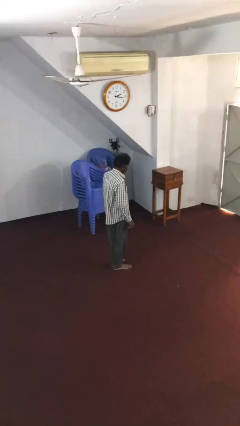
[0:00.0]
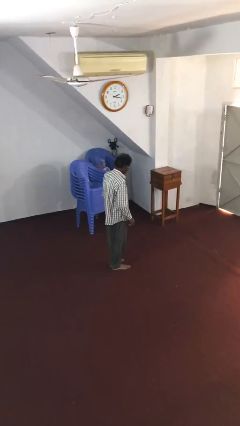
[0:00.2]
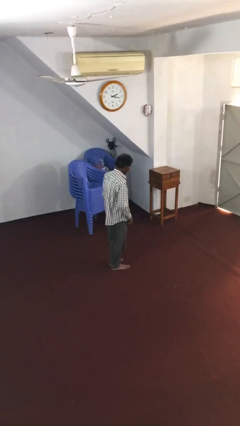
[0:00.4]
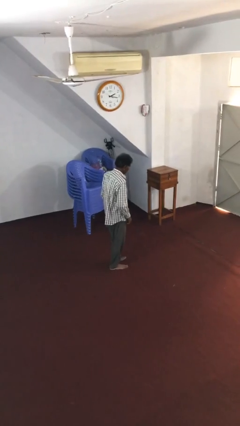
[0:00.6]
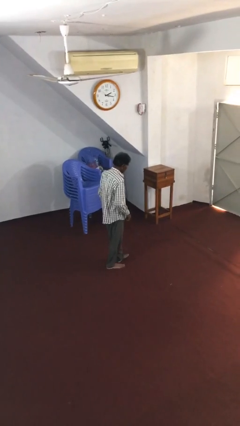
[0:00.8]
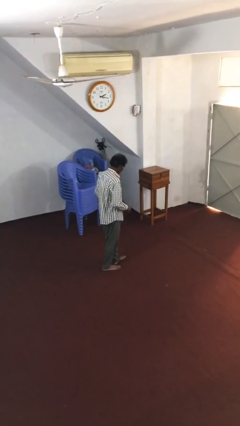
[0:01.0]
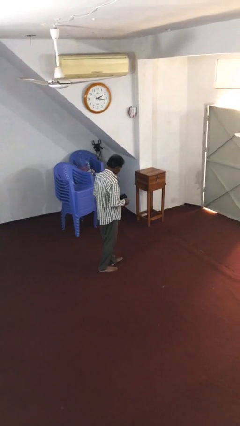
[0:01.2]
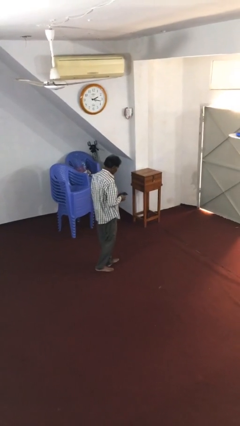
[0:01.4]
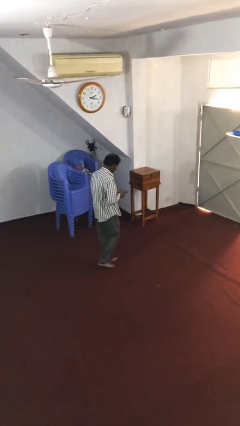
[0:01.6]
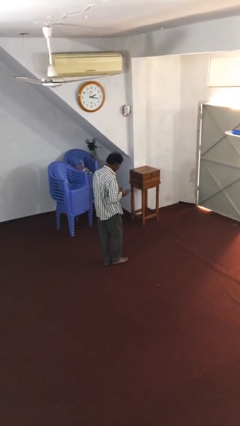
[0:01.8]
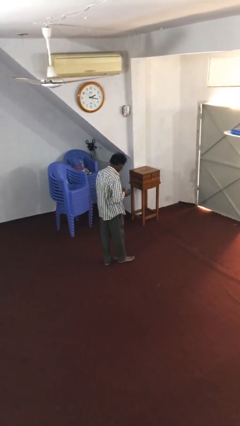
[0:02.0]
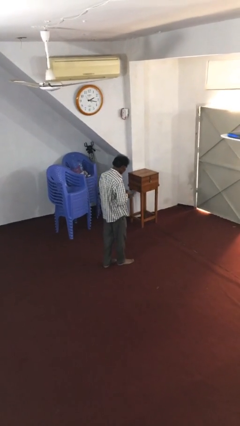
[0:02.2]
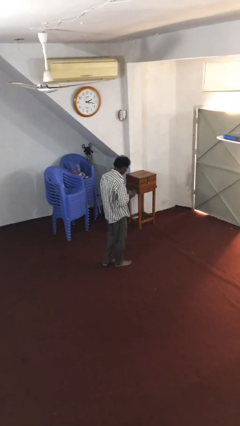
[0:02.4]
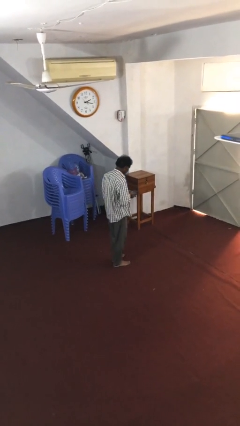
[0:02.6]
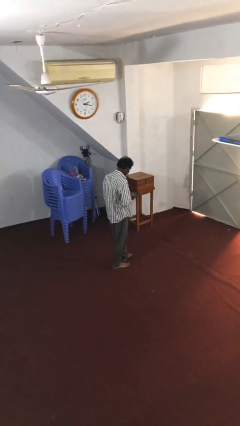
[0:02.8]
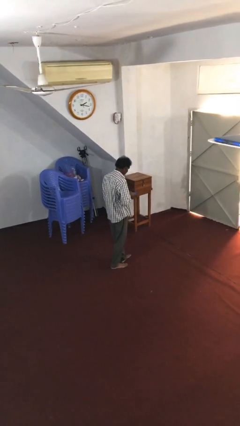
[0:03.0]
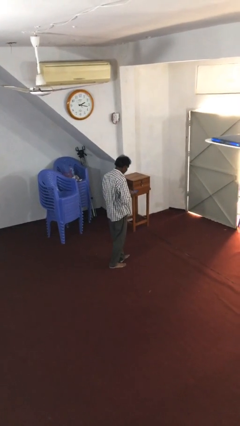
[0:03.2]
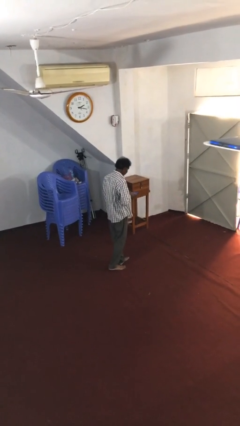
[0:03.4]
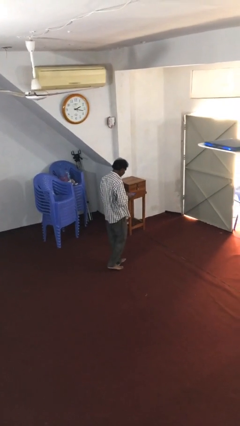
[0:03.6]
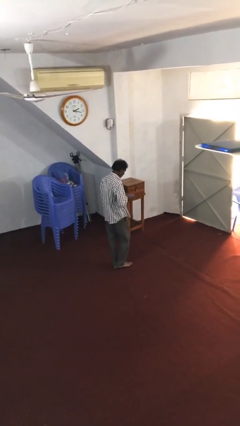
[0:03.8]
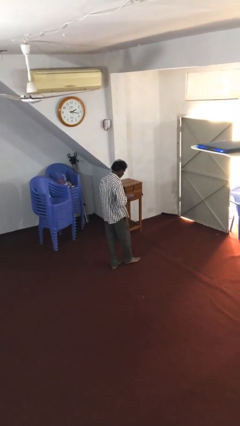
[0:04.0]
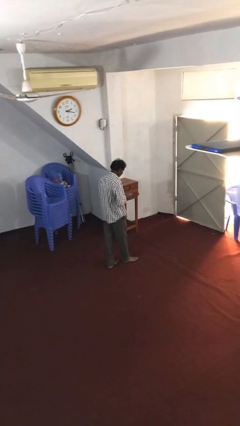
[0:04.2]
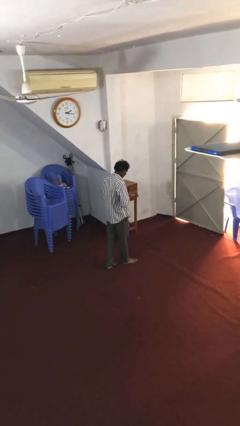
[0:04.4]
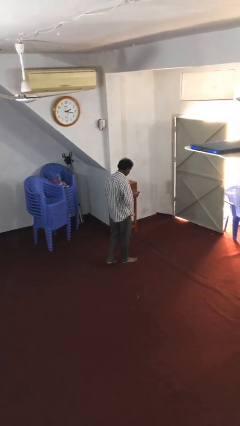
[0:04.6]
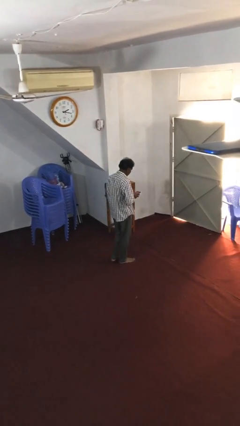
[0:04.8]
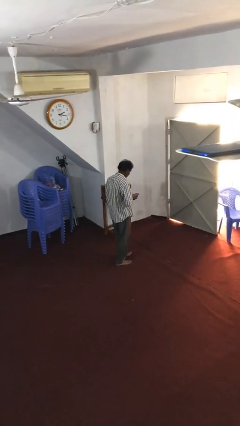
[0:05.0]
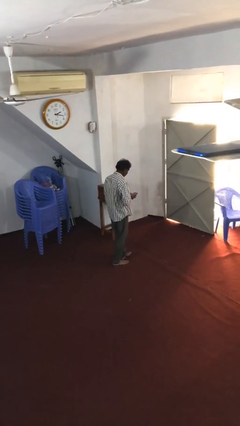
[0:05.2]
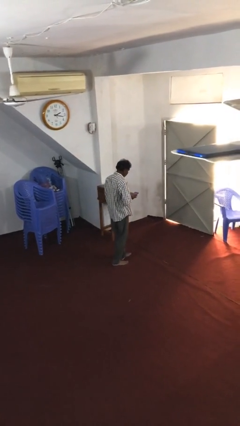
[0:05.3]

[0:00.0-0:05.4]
person texts on phone

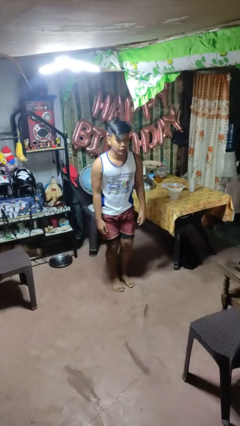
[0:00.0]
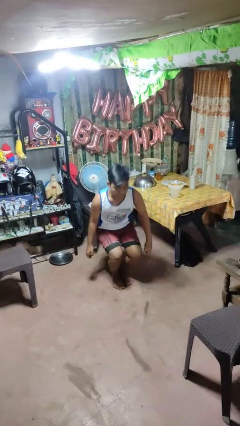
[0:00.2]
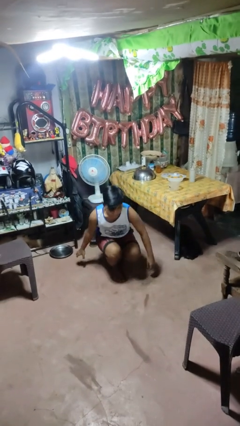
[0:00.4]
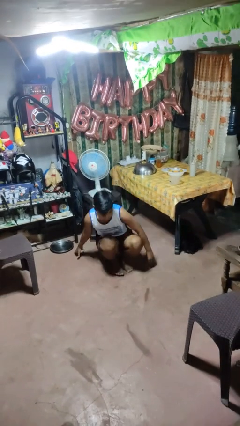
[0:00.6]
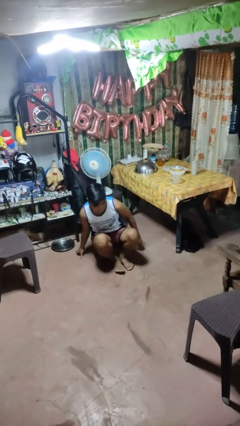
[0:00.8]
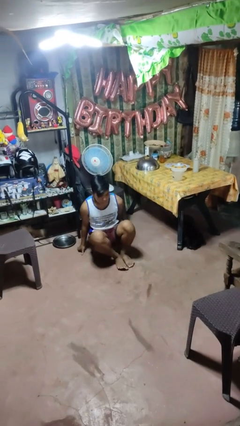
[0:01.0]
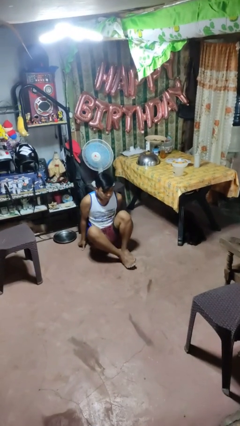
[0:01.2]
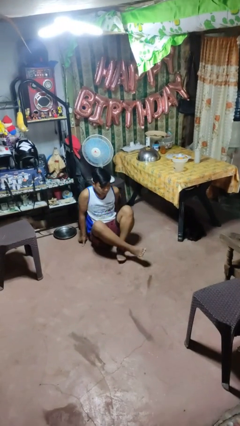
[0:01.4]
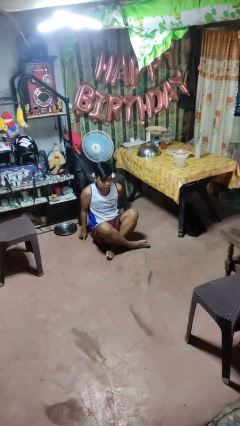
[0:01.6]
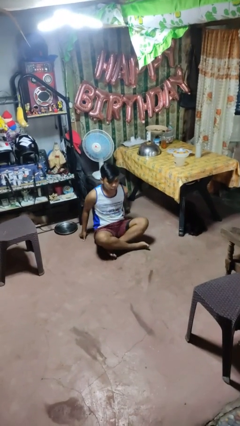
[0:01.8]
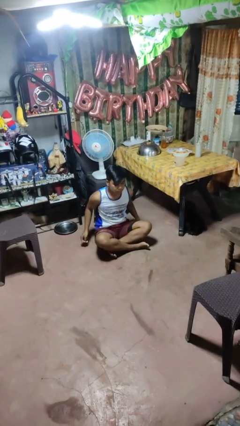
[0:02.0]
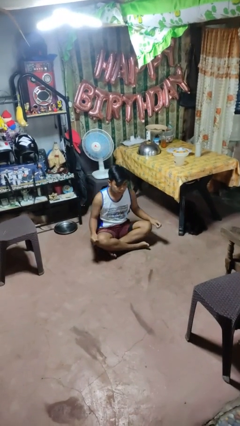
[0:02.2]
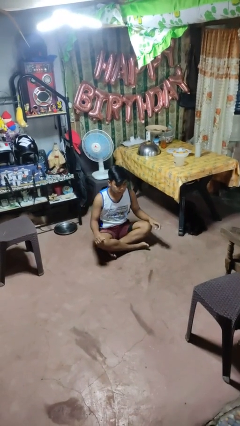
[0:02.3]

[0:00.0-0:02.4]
person sits crisscross

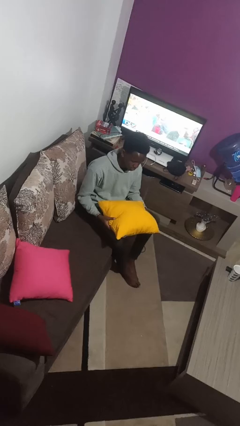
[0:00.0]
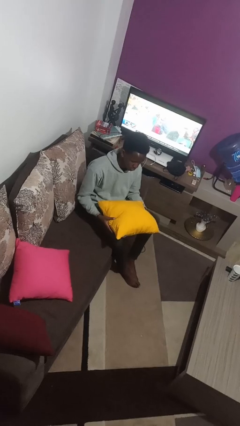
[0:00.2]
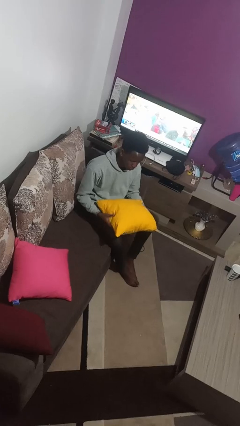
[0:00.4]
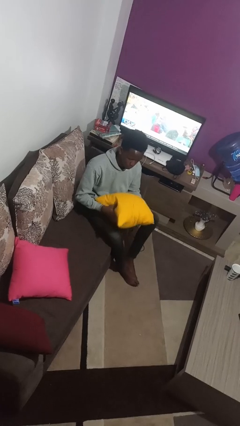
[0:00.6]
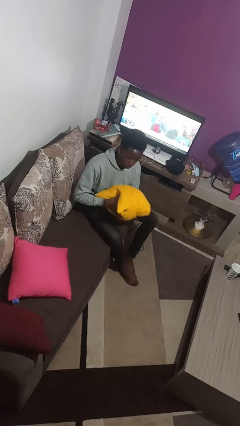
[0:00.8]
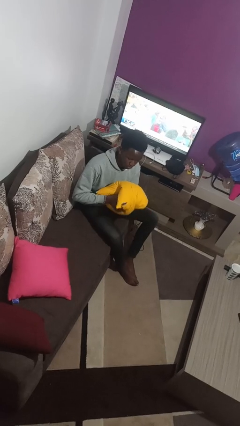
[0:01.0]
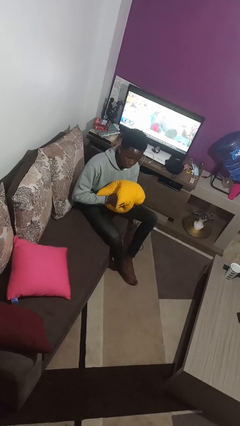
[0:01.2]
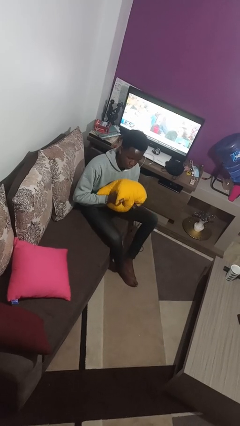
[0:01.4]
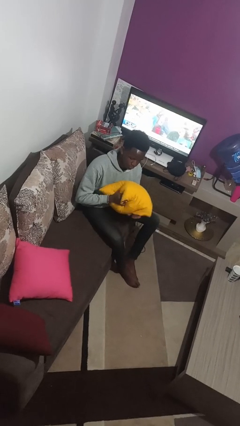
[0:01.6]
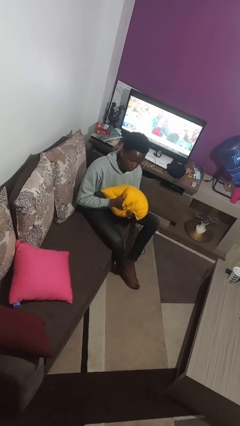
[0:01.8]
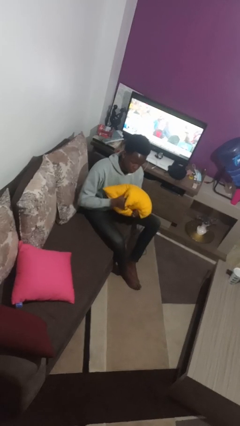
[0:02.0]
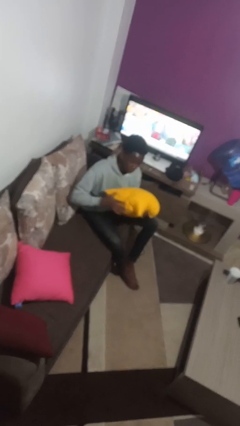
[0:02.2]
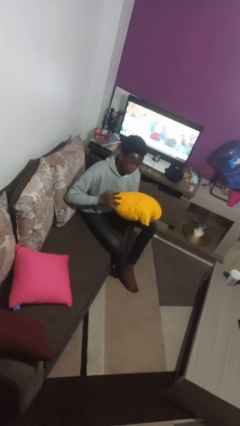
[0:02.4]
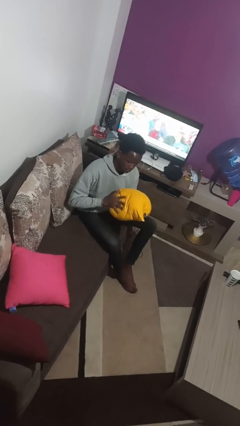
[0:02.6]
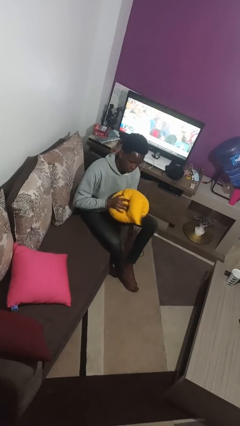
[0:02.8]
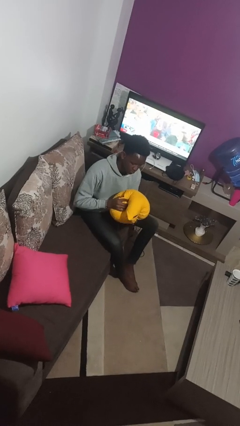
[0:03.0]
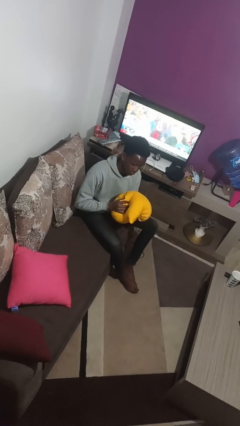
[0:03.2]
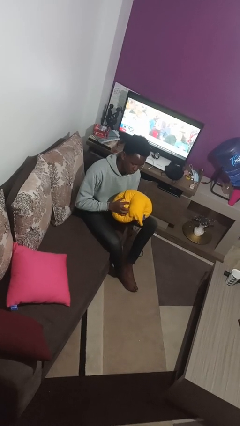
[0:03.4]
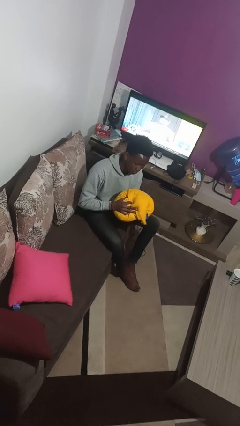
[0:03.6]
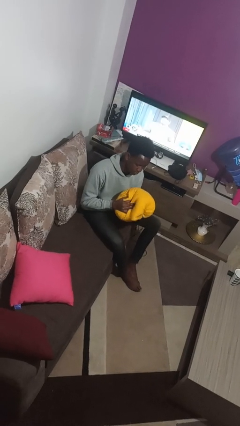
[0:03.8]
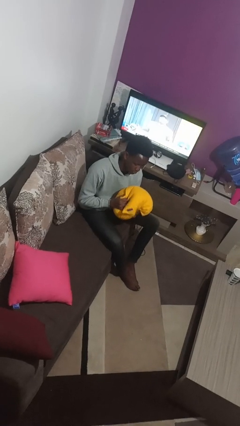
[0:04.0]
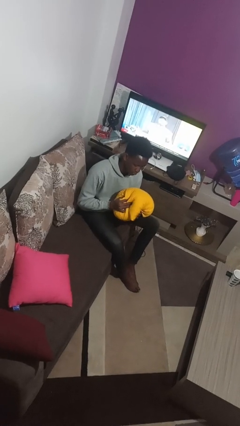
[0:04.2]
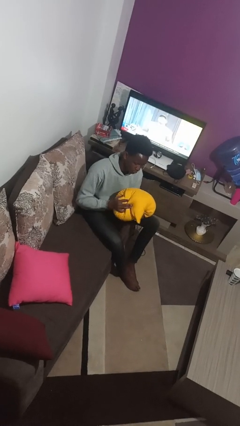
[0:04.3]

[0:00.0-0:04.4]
person squeezes object

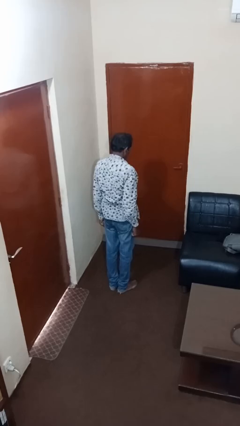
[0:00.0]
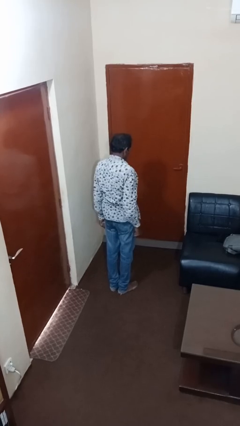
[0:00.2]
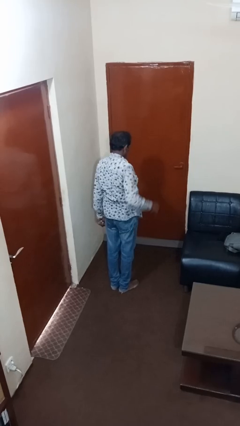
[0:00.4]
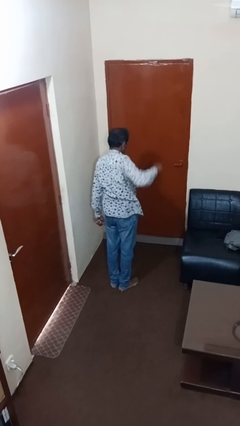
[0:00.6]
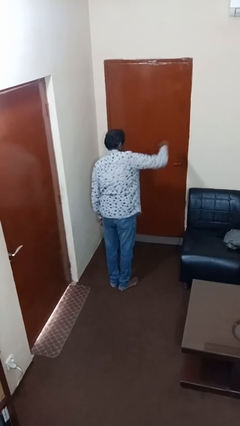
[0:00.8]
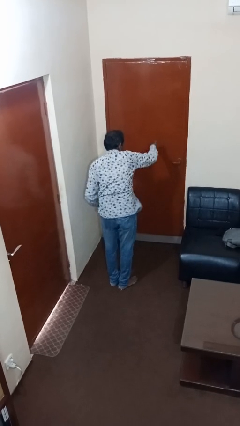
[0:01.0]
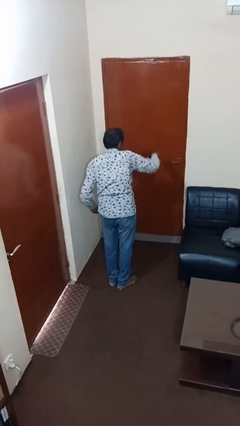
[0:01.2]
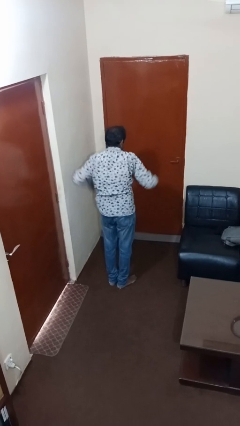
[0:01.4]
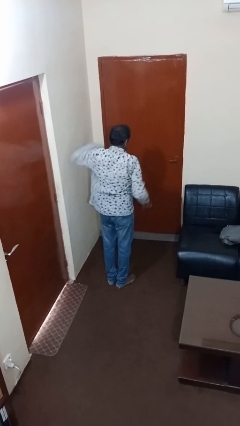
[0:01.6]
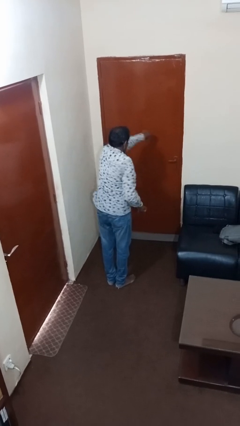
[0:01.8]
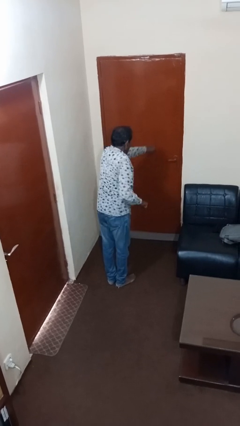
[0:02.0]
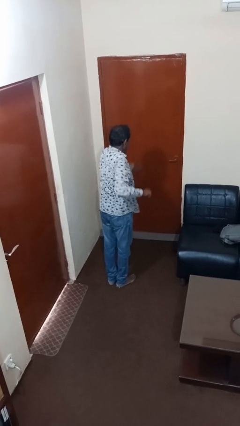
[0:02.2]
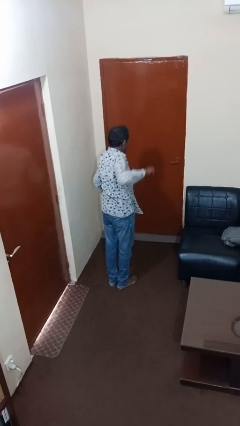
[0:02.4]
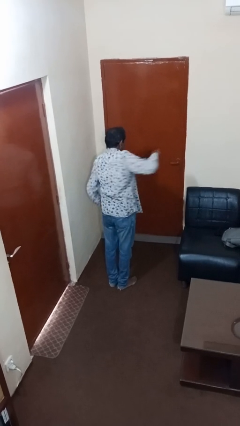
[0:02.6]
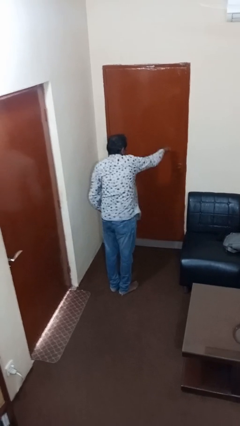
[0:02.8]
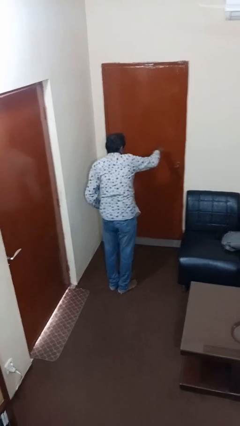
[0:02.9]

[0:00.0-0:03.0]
person punches

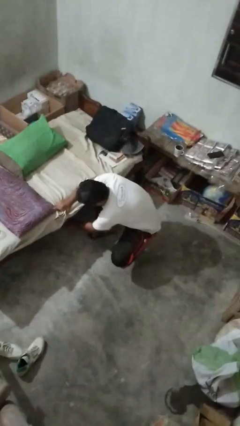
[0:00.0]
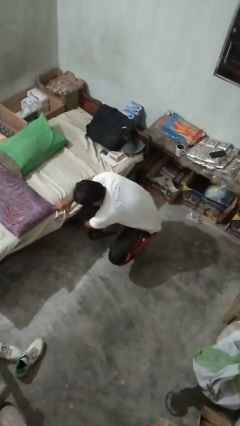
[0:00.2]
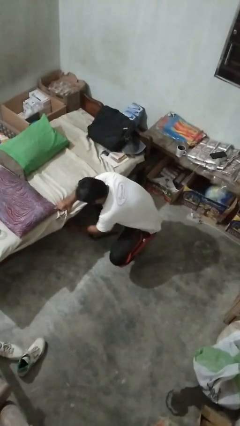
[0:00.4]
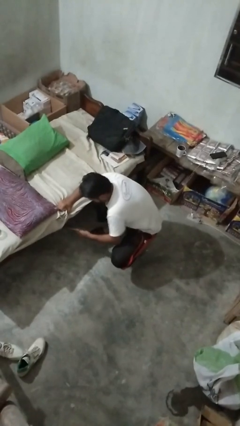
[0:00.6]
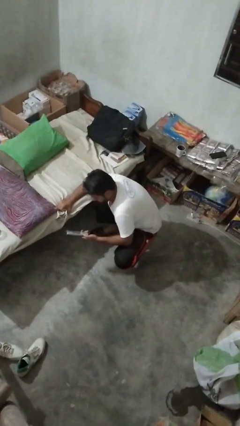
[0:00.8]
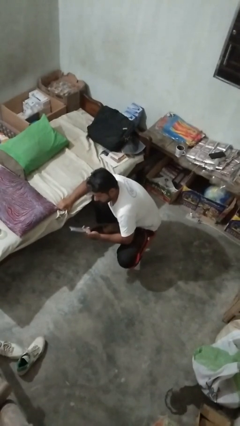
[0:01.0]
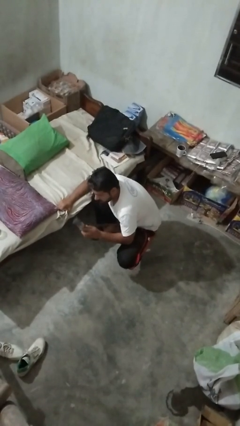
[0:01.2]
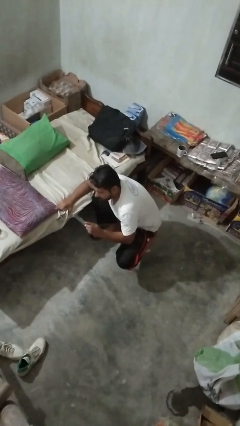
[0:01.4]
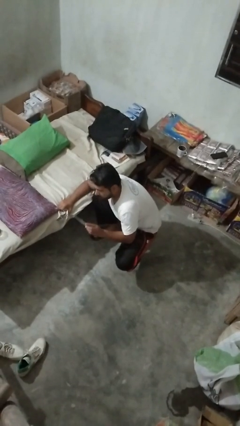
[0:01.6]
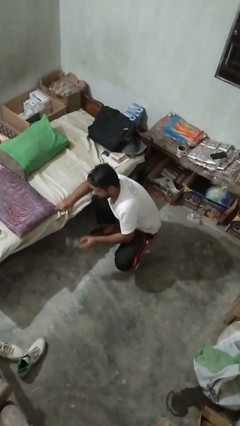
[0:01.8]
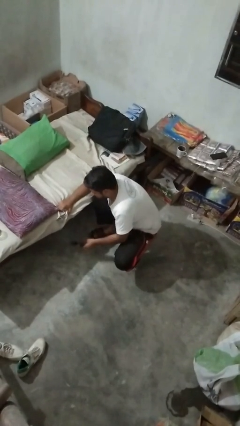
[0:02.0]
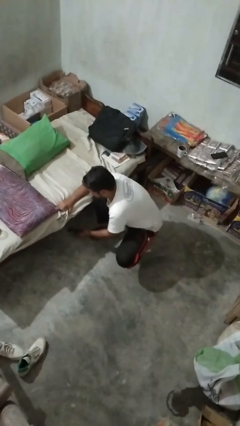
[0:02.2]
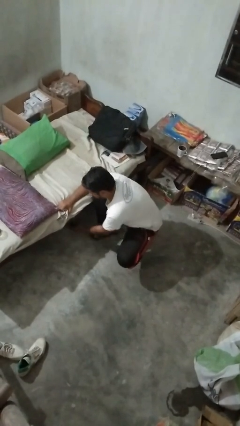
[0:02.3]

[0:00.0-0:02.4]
person searches under couch
